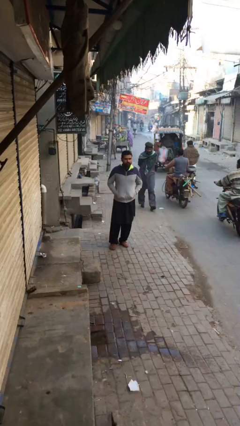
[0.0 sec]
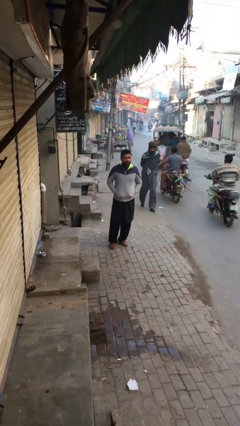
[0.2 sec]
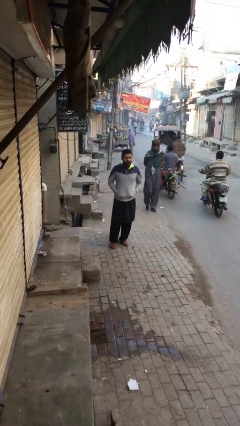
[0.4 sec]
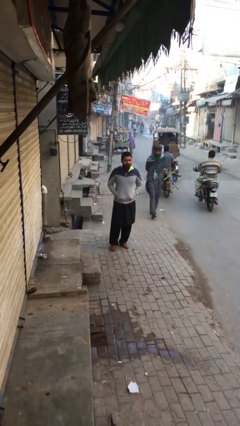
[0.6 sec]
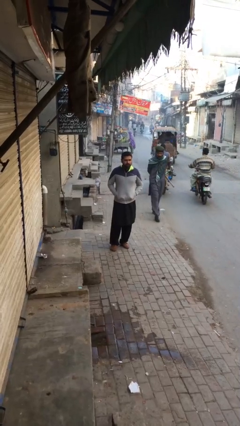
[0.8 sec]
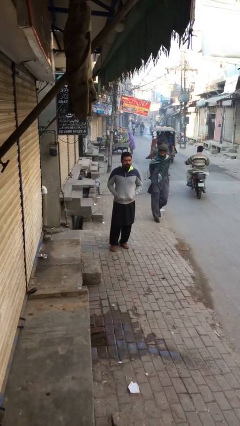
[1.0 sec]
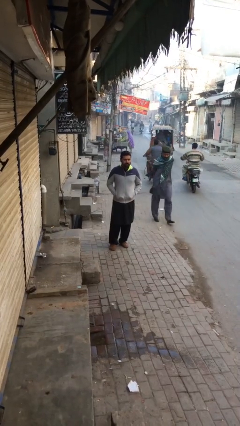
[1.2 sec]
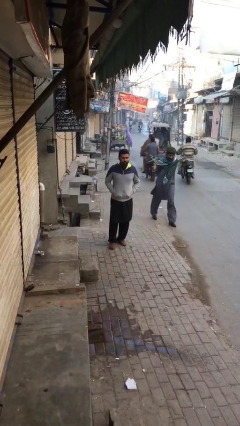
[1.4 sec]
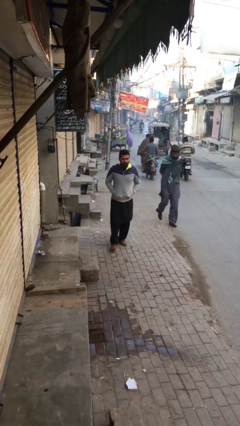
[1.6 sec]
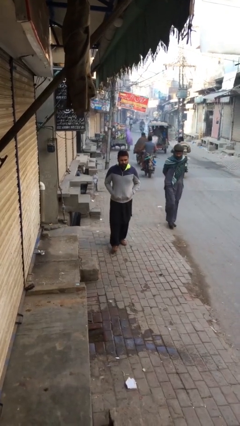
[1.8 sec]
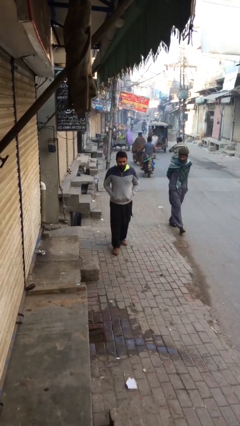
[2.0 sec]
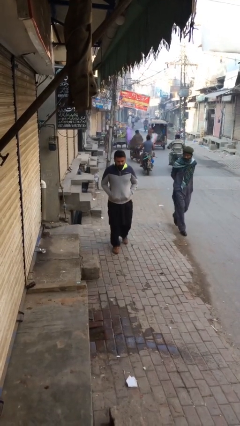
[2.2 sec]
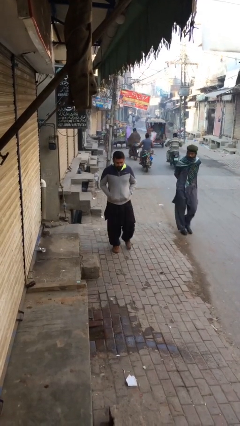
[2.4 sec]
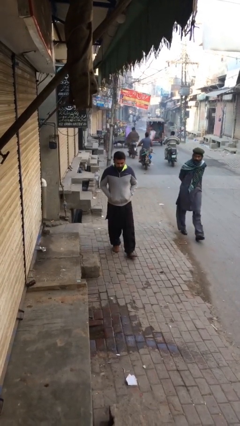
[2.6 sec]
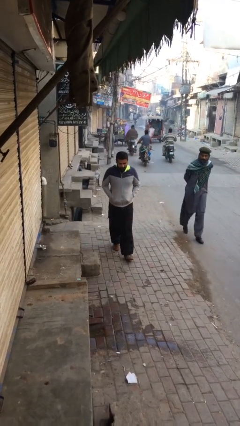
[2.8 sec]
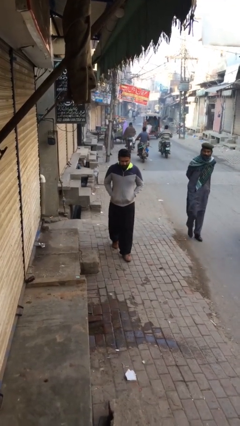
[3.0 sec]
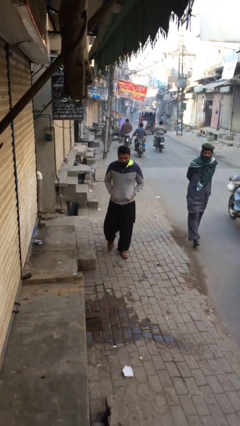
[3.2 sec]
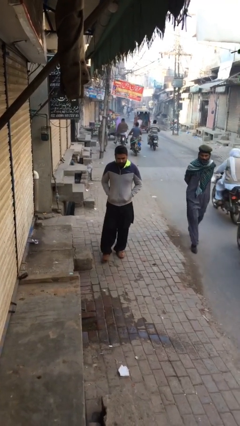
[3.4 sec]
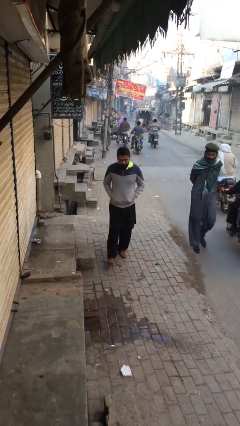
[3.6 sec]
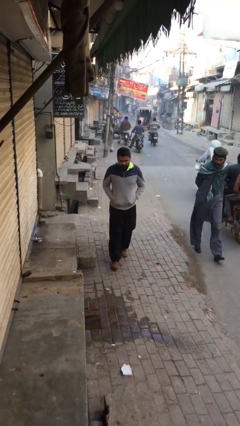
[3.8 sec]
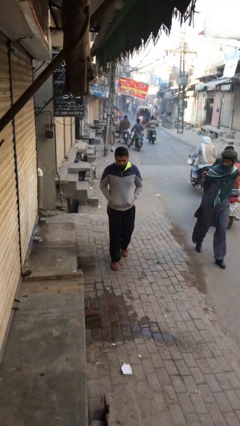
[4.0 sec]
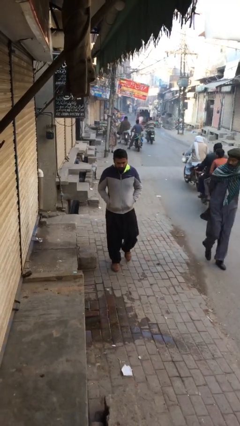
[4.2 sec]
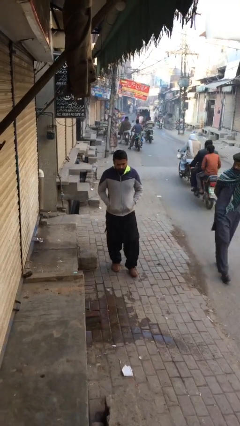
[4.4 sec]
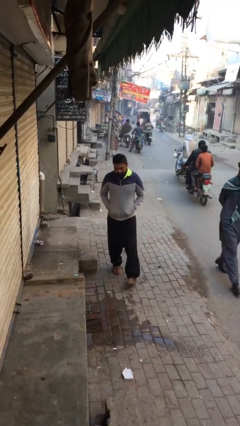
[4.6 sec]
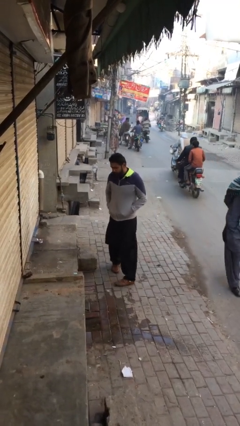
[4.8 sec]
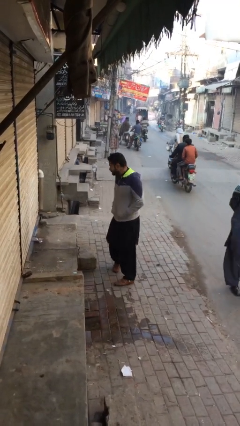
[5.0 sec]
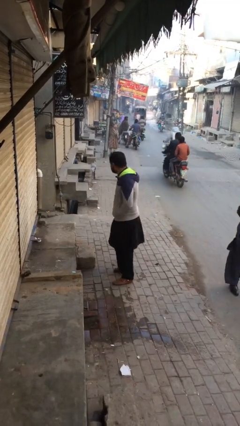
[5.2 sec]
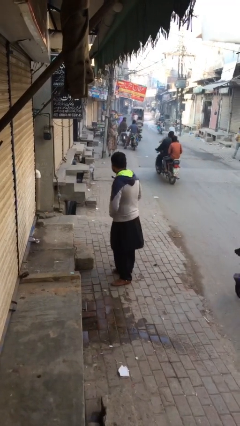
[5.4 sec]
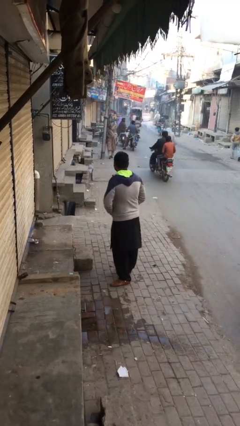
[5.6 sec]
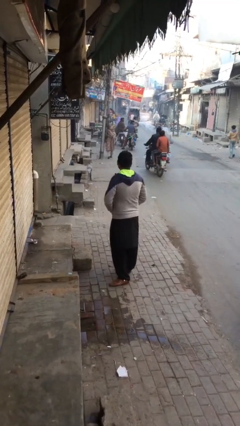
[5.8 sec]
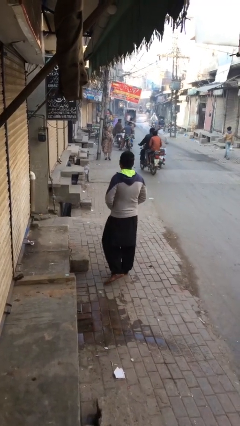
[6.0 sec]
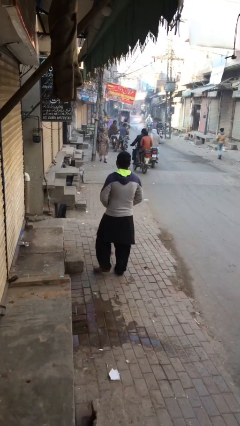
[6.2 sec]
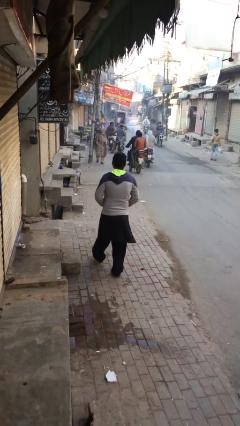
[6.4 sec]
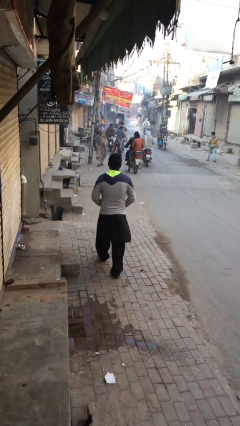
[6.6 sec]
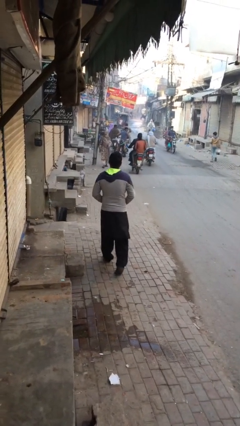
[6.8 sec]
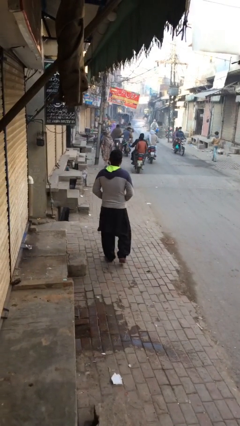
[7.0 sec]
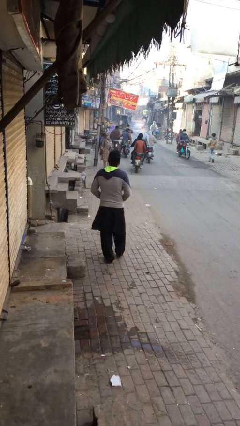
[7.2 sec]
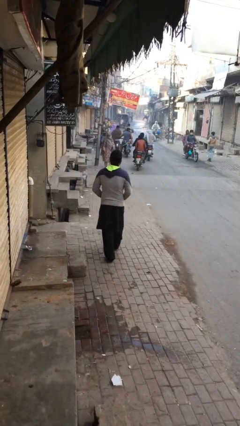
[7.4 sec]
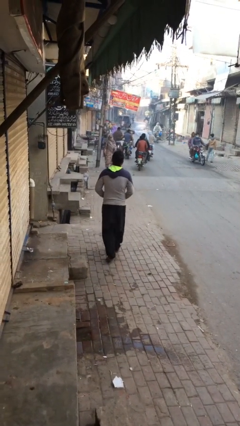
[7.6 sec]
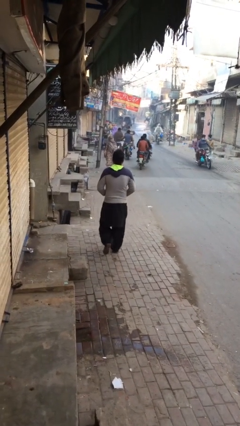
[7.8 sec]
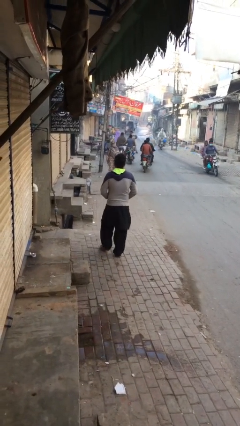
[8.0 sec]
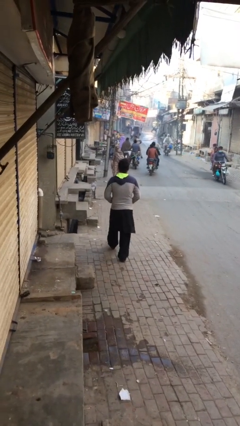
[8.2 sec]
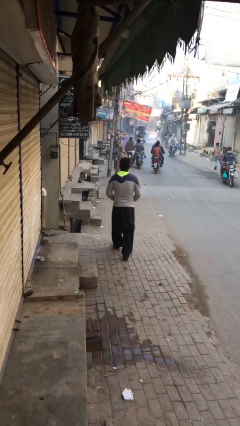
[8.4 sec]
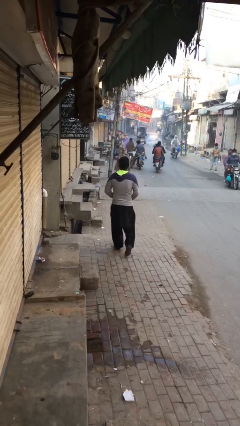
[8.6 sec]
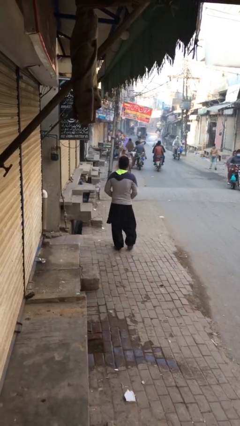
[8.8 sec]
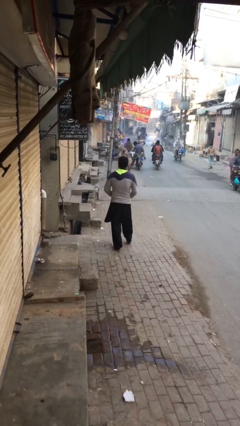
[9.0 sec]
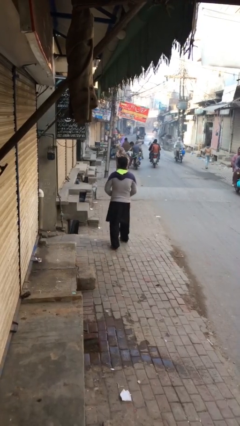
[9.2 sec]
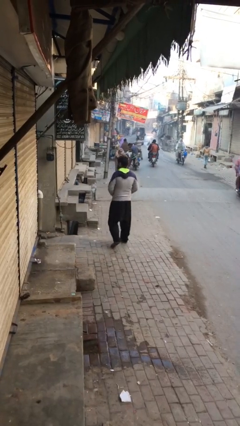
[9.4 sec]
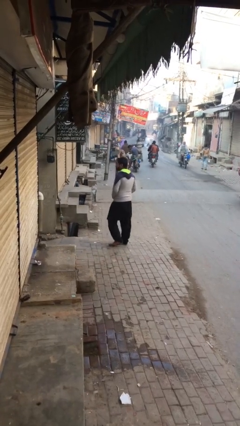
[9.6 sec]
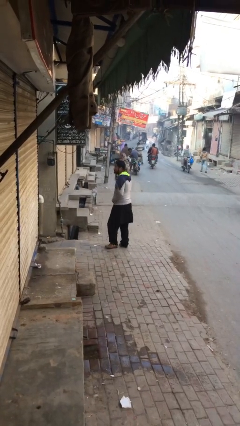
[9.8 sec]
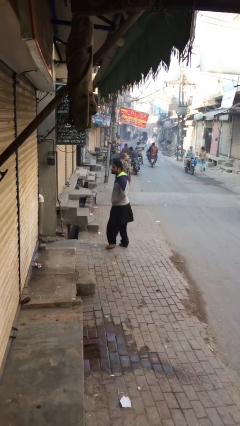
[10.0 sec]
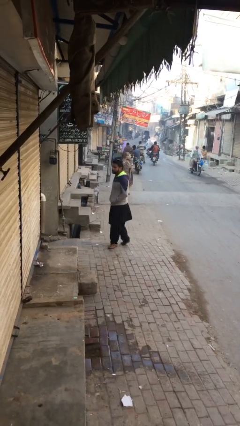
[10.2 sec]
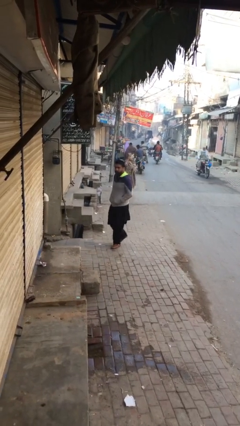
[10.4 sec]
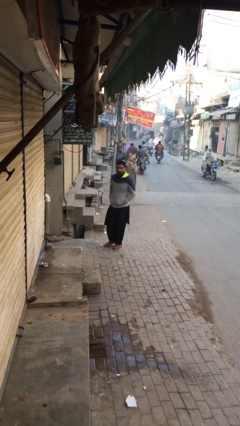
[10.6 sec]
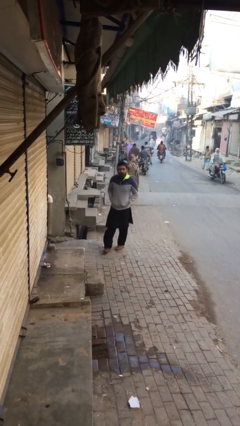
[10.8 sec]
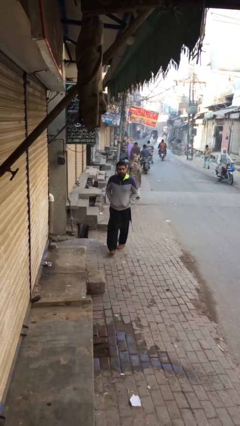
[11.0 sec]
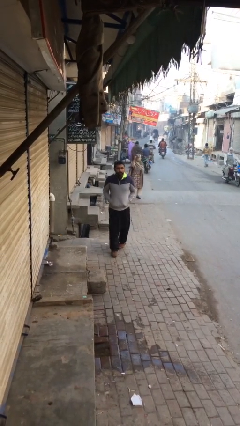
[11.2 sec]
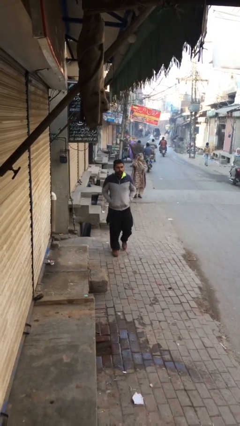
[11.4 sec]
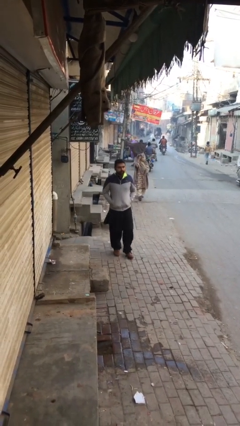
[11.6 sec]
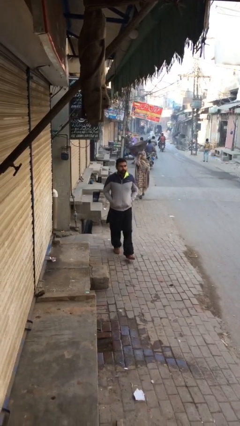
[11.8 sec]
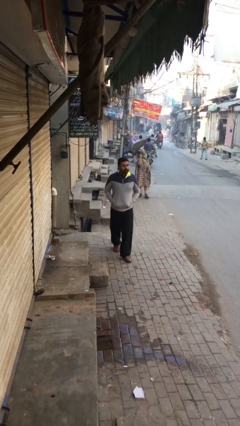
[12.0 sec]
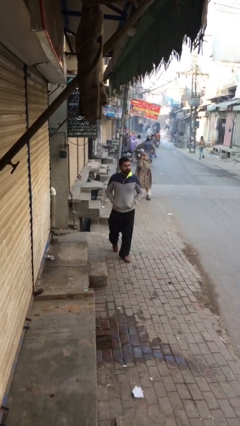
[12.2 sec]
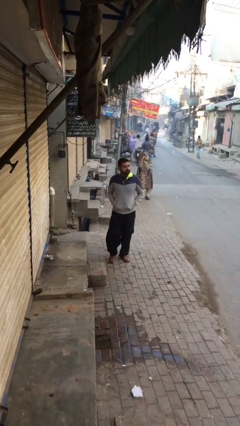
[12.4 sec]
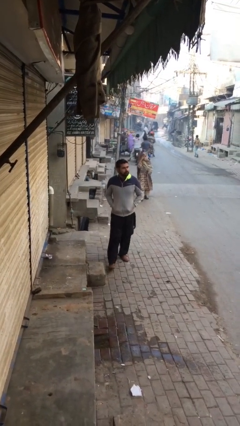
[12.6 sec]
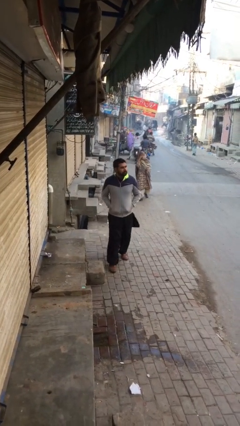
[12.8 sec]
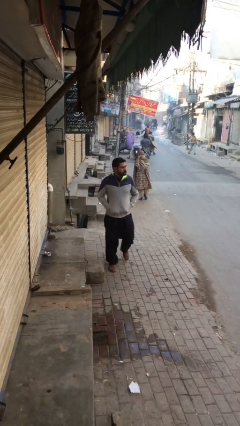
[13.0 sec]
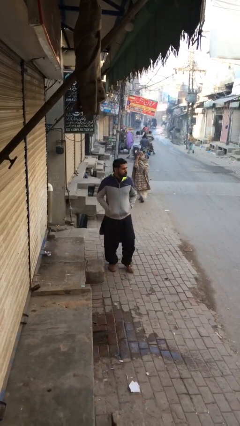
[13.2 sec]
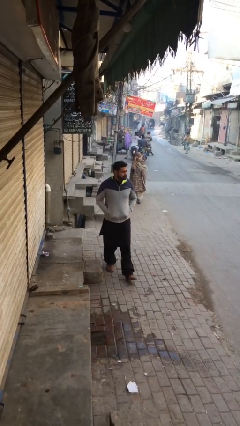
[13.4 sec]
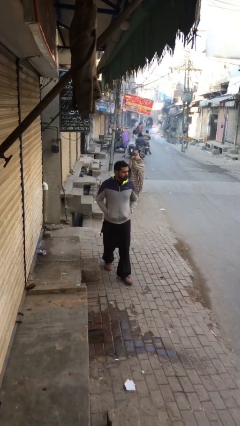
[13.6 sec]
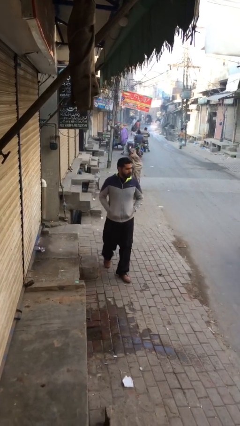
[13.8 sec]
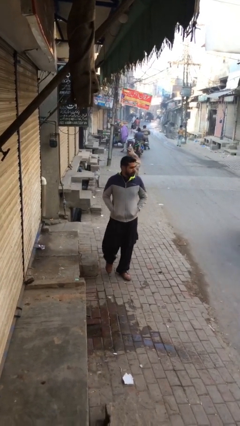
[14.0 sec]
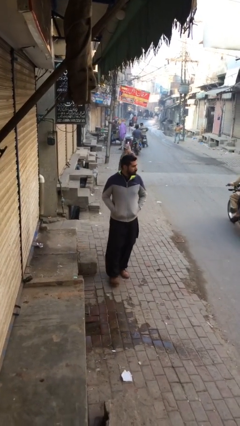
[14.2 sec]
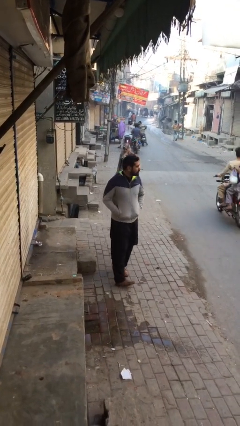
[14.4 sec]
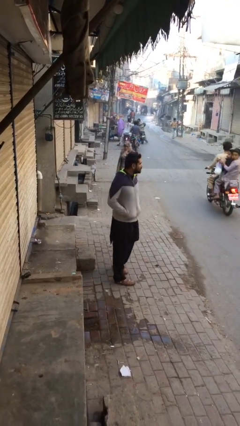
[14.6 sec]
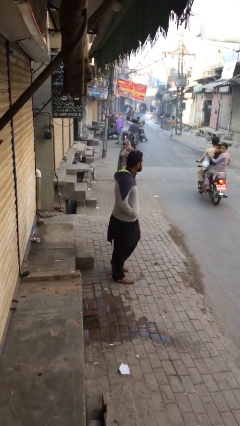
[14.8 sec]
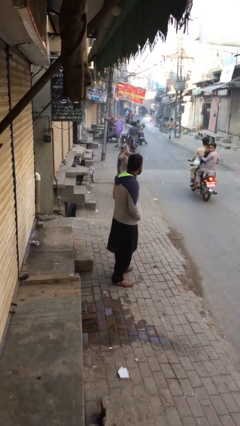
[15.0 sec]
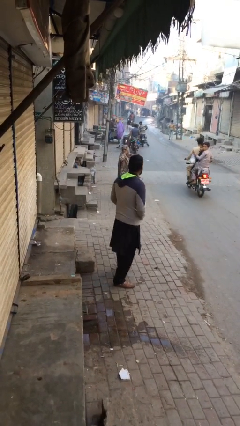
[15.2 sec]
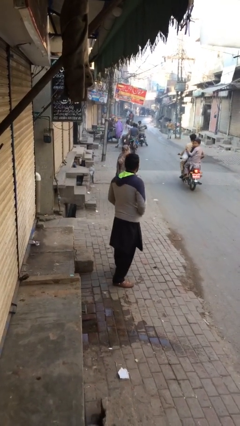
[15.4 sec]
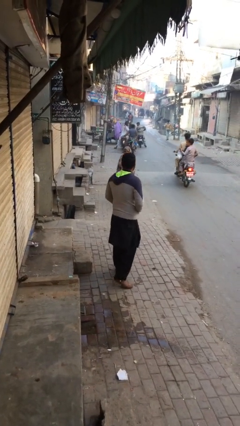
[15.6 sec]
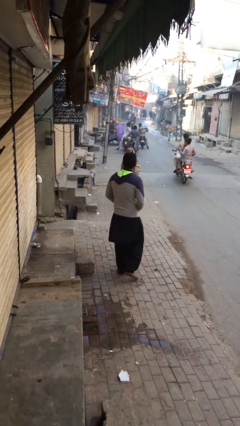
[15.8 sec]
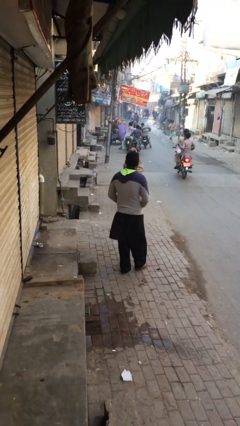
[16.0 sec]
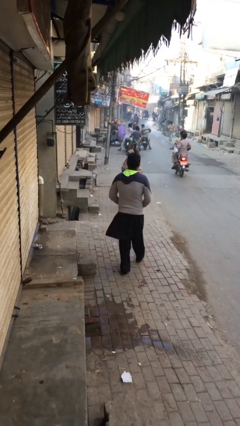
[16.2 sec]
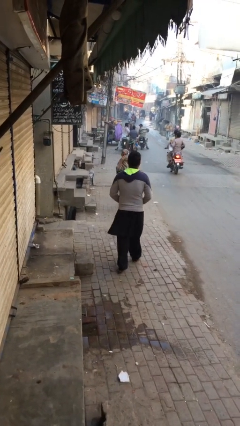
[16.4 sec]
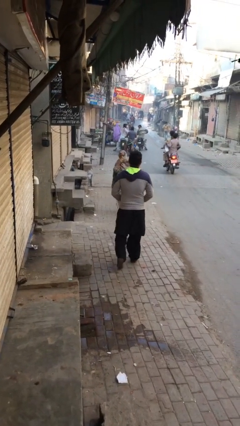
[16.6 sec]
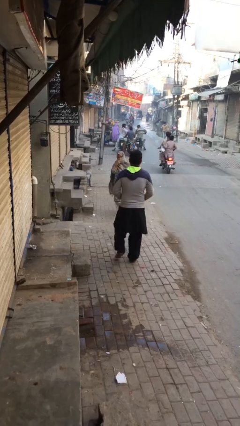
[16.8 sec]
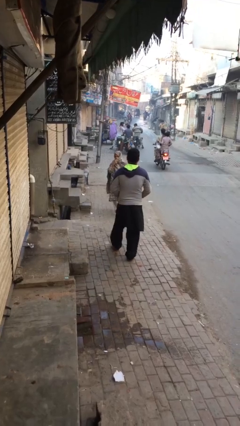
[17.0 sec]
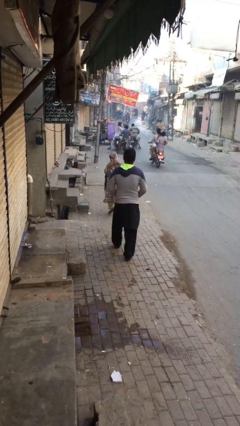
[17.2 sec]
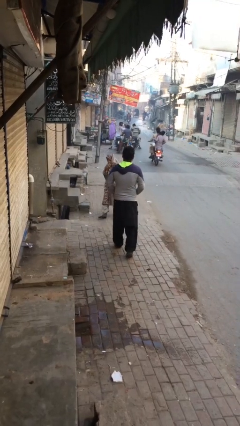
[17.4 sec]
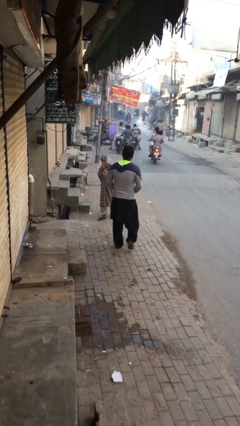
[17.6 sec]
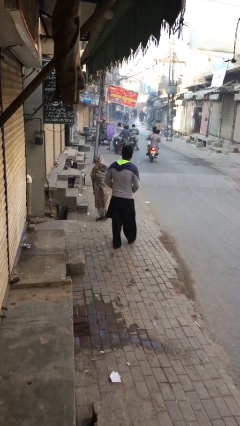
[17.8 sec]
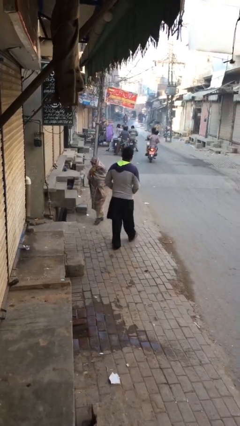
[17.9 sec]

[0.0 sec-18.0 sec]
person walks
